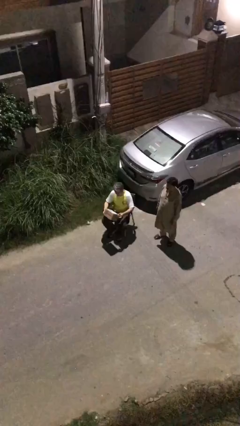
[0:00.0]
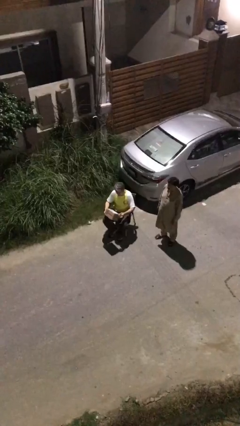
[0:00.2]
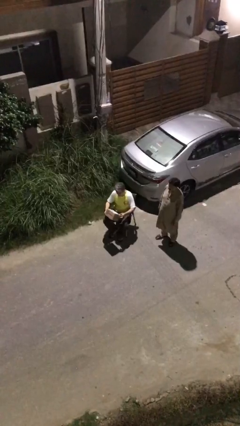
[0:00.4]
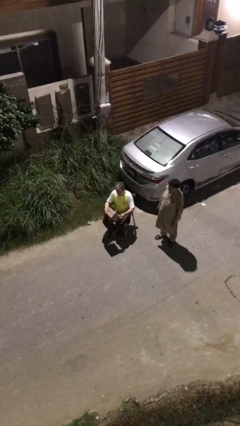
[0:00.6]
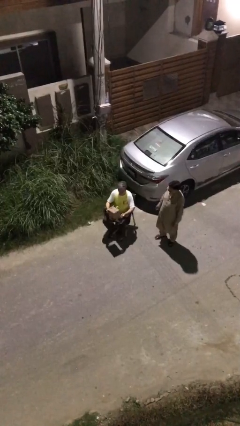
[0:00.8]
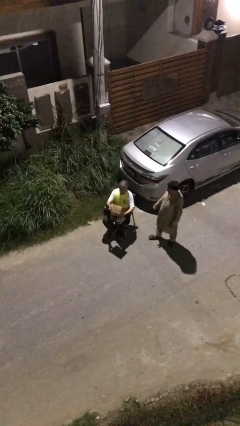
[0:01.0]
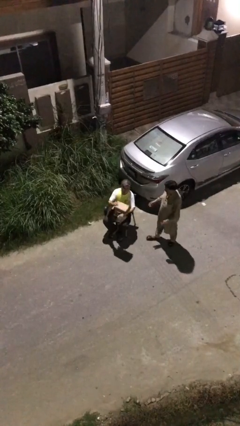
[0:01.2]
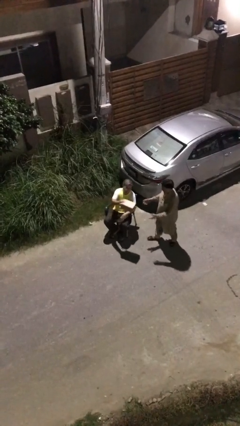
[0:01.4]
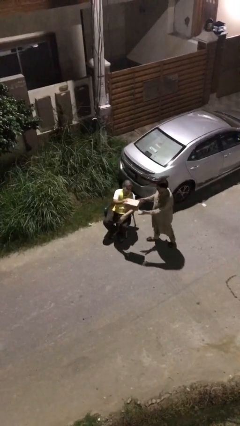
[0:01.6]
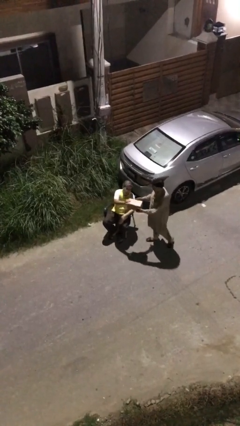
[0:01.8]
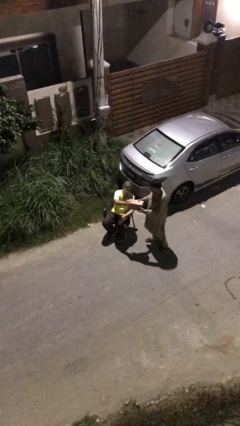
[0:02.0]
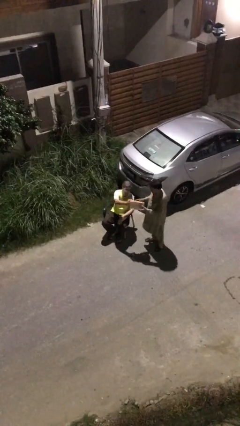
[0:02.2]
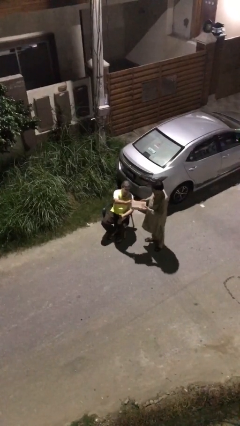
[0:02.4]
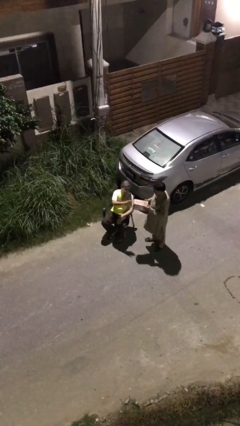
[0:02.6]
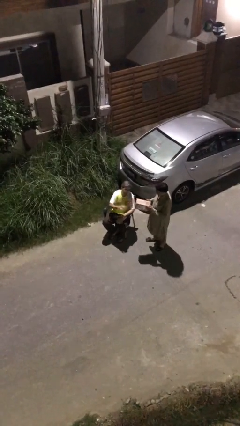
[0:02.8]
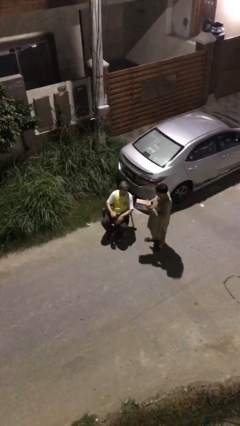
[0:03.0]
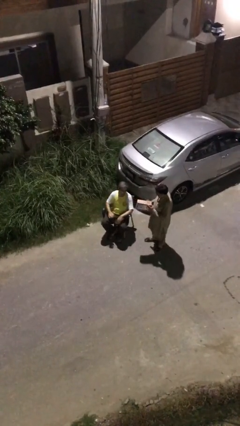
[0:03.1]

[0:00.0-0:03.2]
person transfers object to person

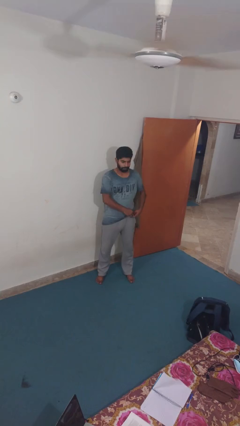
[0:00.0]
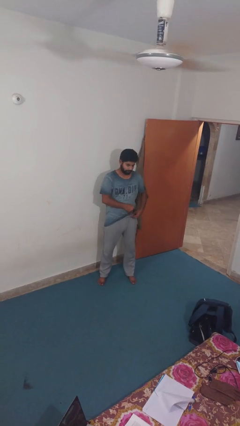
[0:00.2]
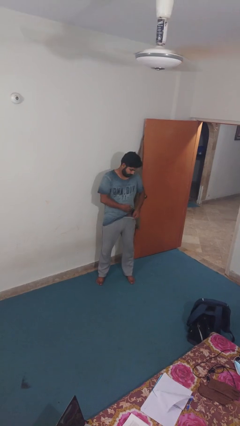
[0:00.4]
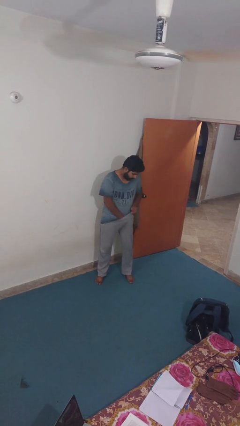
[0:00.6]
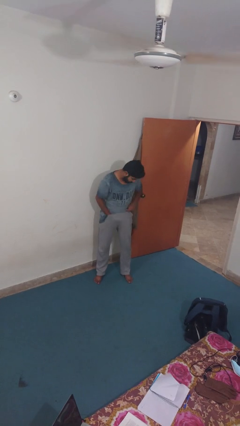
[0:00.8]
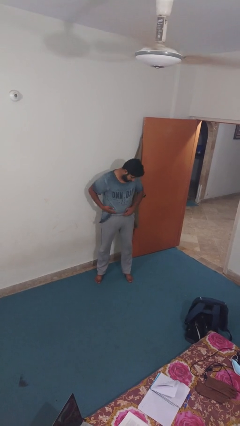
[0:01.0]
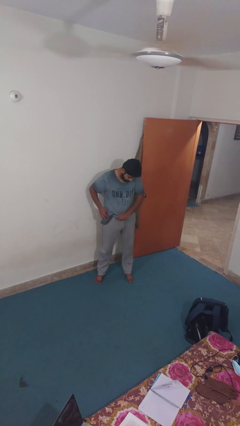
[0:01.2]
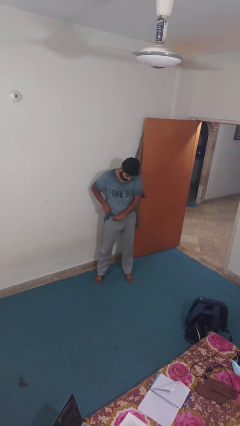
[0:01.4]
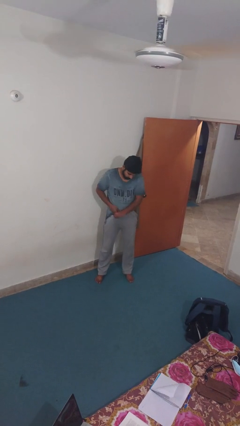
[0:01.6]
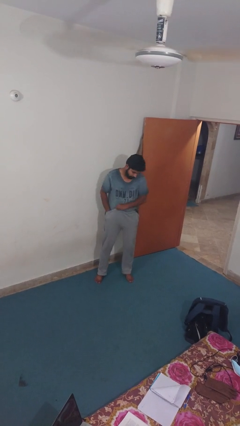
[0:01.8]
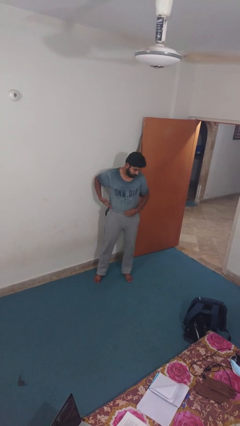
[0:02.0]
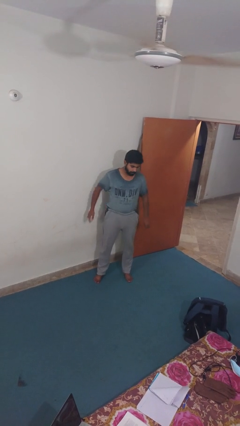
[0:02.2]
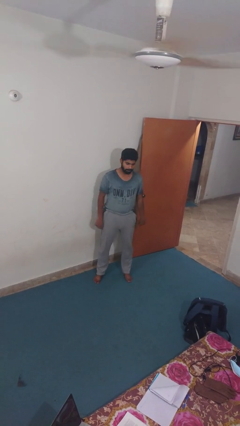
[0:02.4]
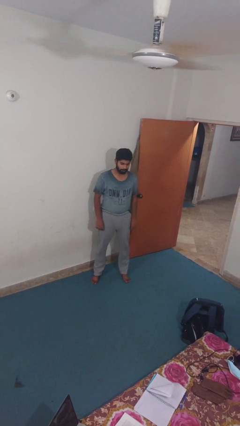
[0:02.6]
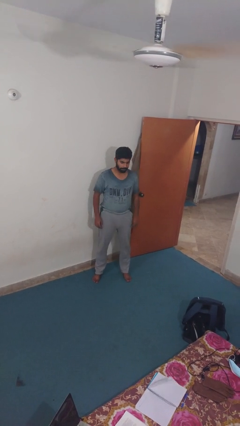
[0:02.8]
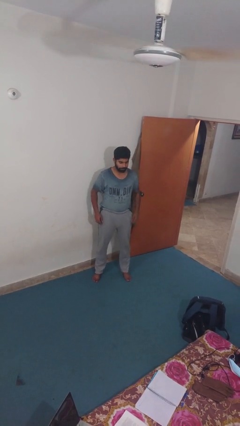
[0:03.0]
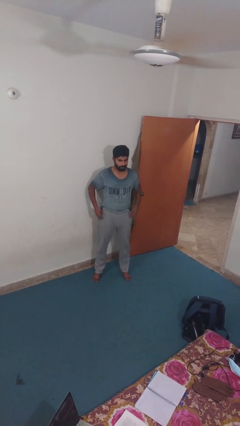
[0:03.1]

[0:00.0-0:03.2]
person tucks in shirt

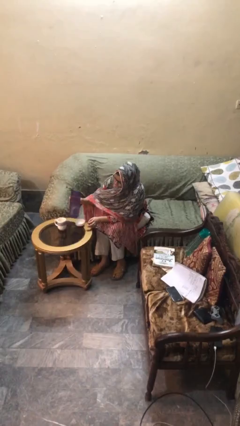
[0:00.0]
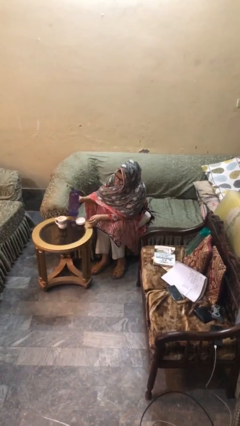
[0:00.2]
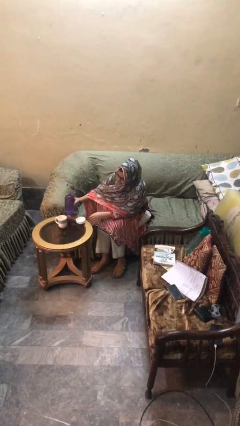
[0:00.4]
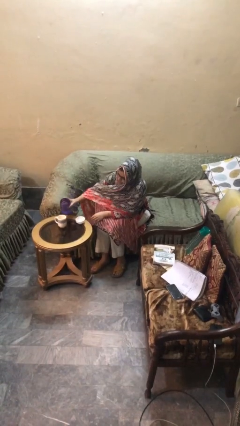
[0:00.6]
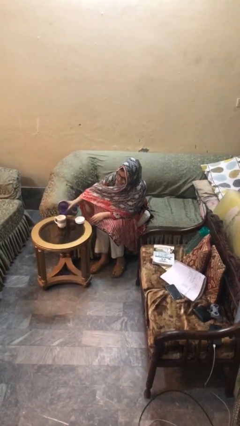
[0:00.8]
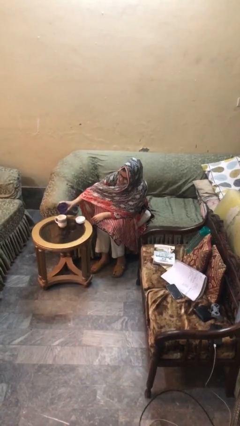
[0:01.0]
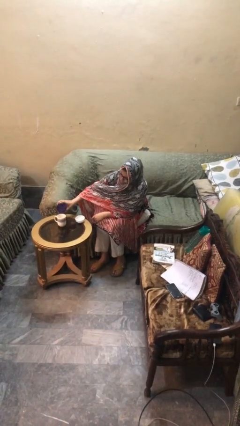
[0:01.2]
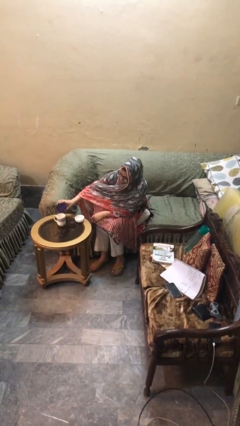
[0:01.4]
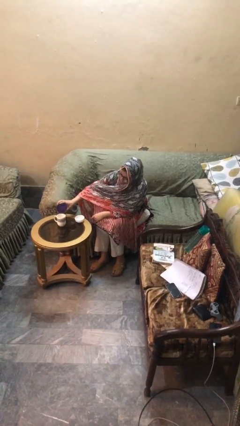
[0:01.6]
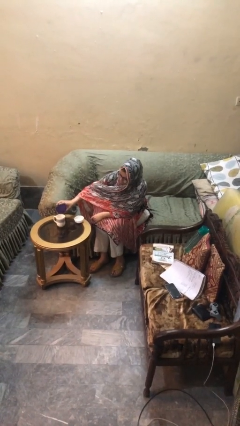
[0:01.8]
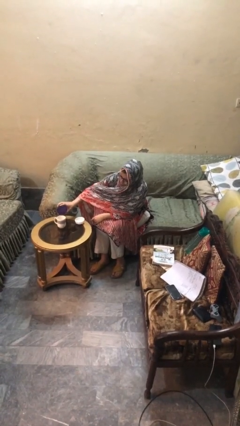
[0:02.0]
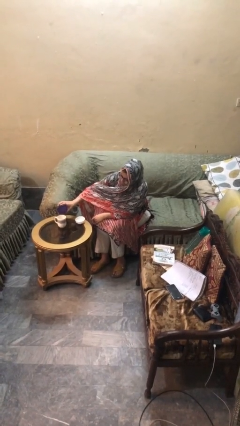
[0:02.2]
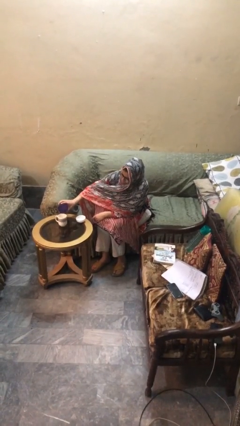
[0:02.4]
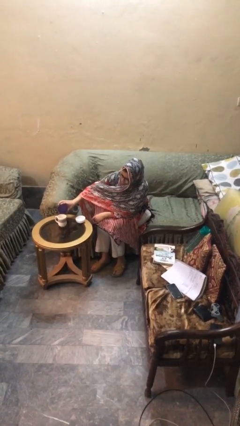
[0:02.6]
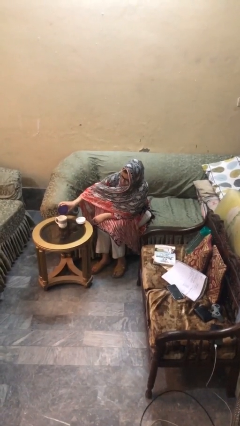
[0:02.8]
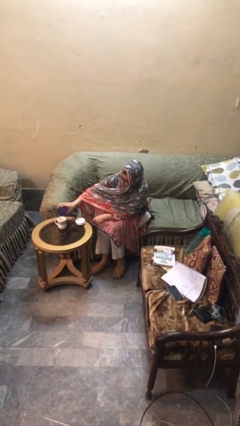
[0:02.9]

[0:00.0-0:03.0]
person pours liquid into cup

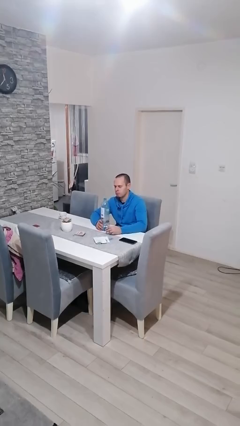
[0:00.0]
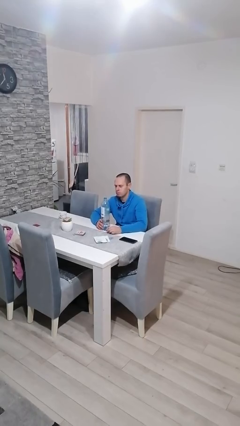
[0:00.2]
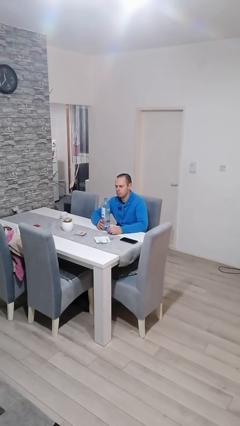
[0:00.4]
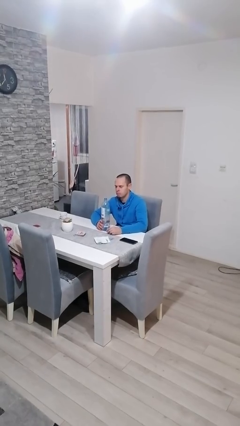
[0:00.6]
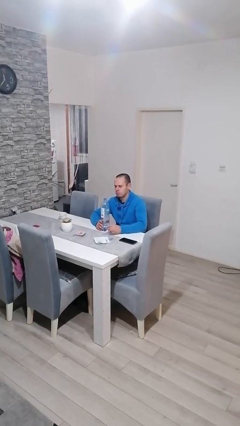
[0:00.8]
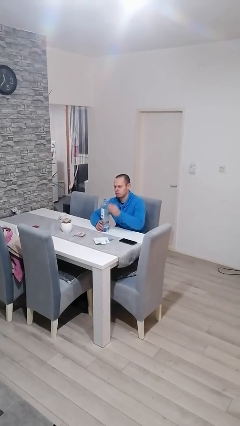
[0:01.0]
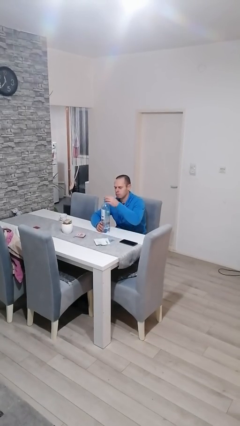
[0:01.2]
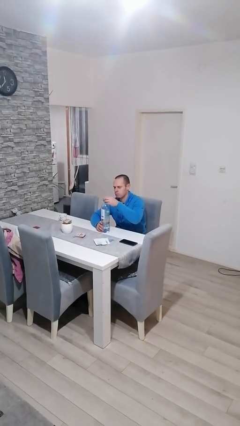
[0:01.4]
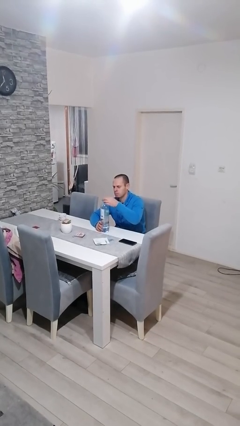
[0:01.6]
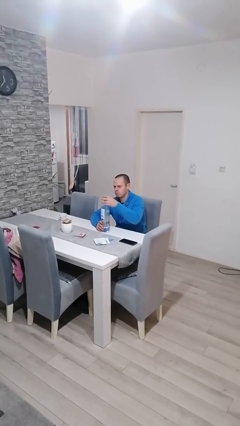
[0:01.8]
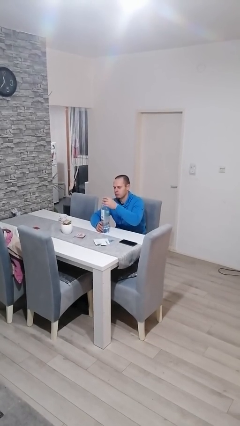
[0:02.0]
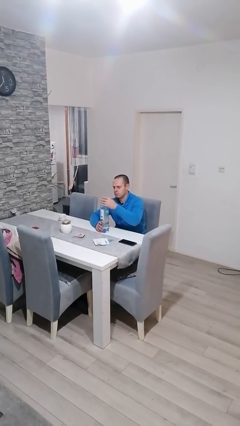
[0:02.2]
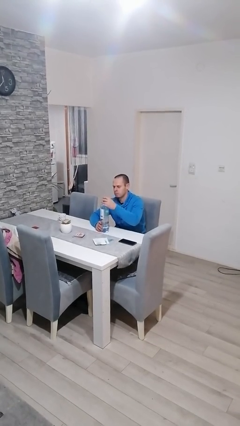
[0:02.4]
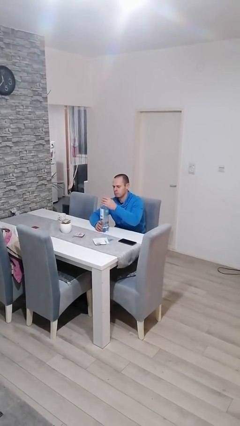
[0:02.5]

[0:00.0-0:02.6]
person screws lid to bottle

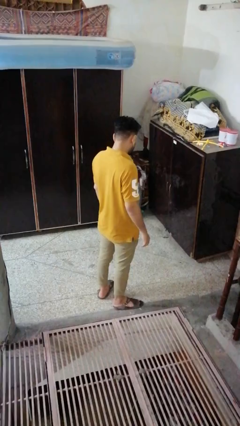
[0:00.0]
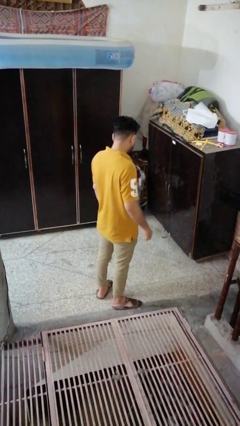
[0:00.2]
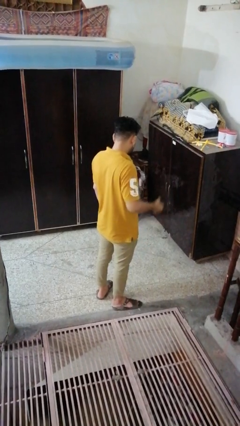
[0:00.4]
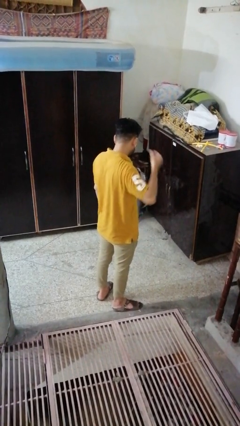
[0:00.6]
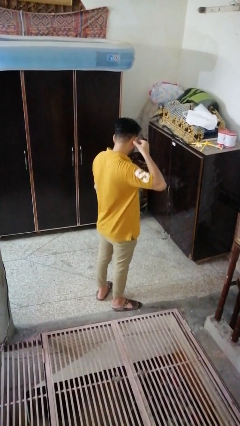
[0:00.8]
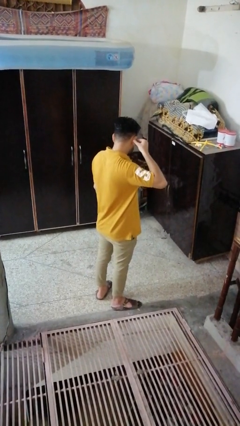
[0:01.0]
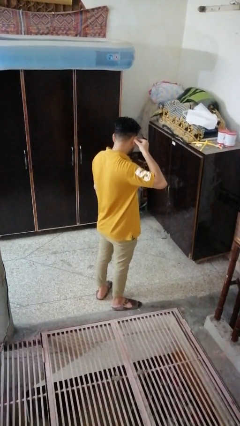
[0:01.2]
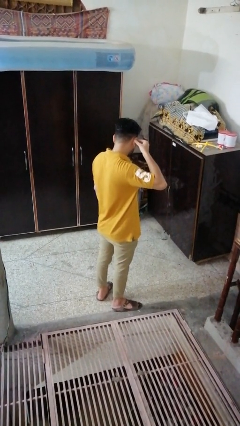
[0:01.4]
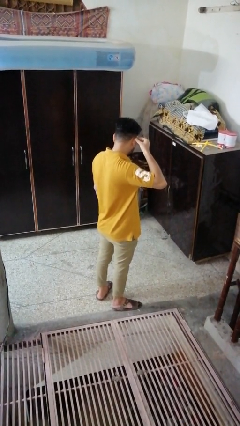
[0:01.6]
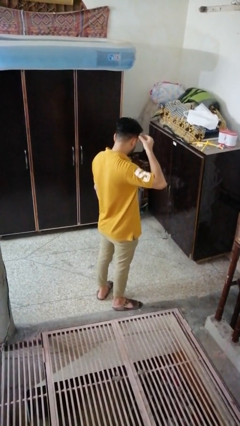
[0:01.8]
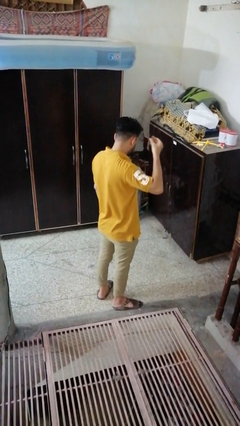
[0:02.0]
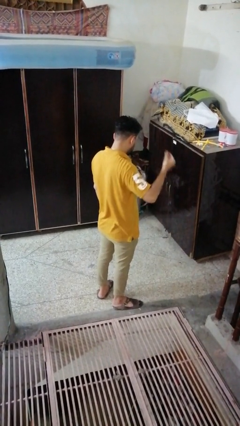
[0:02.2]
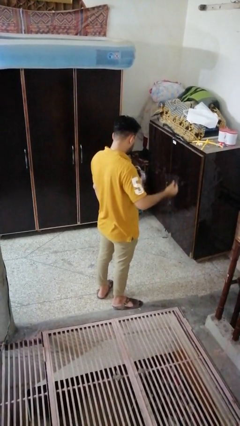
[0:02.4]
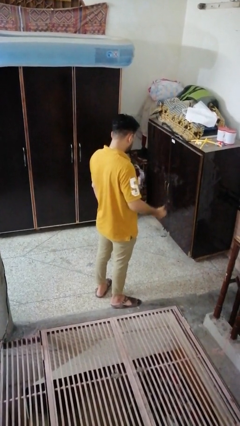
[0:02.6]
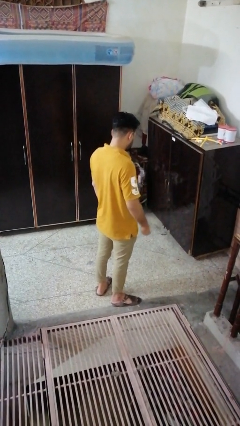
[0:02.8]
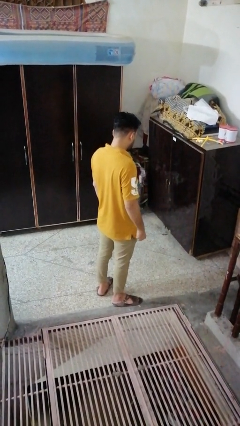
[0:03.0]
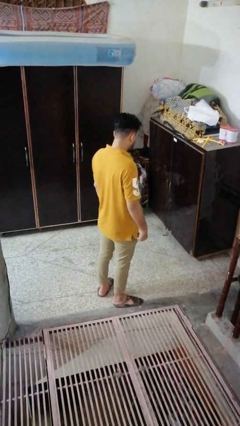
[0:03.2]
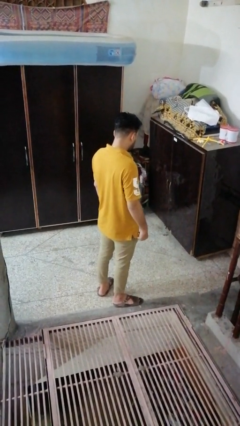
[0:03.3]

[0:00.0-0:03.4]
person takes off earrings

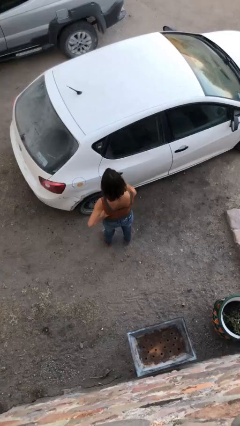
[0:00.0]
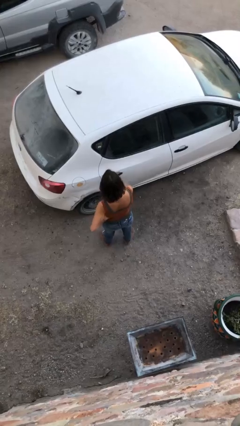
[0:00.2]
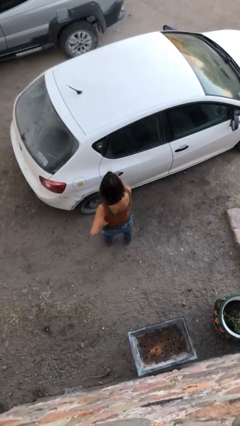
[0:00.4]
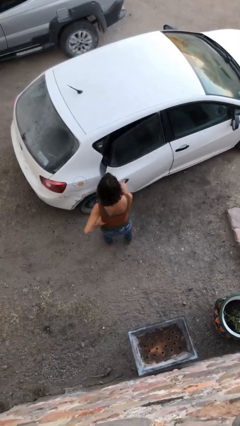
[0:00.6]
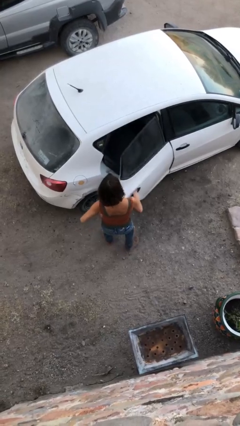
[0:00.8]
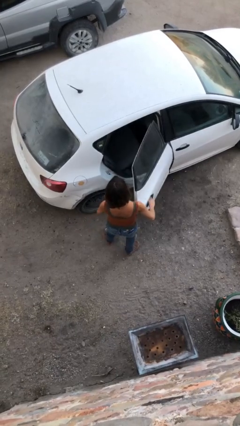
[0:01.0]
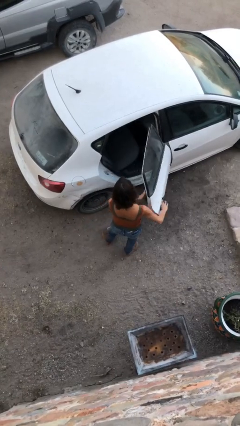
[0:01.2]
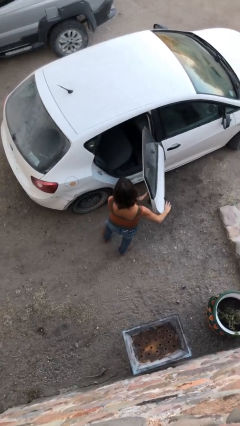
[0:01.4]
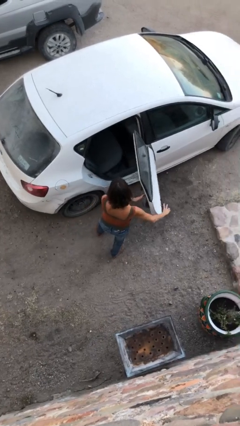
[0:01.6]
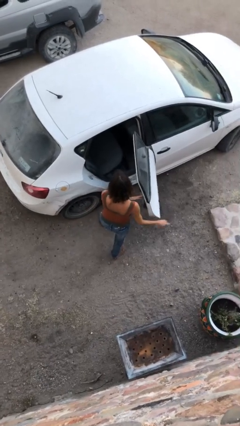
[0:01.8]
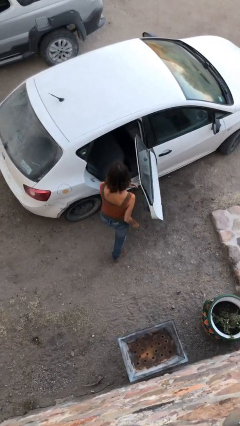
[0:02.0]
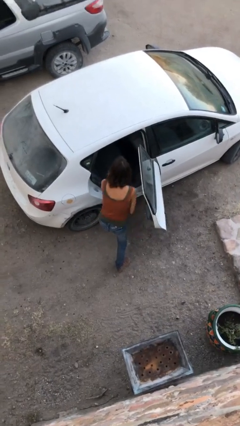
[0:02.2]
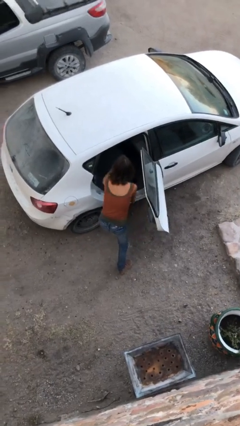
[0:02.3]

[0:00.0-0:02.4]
person opens car door
